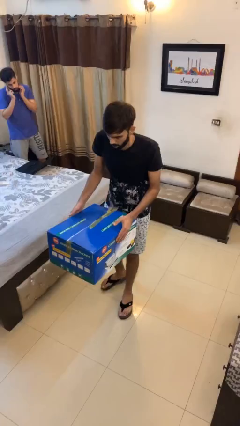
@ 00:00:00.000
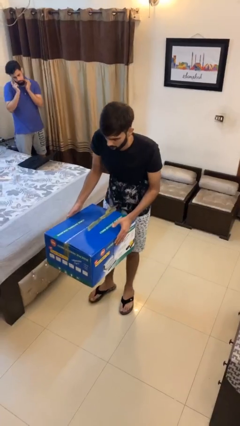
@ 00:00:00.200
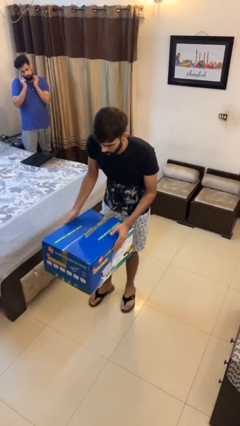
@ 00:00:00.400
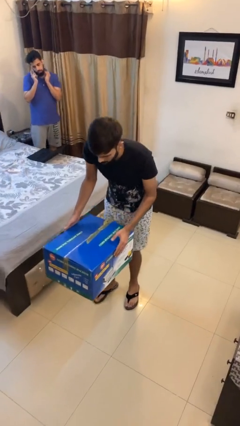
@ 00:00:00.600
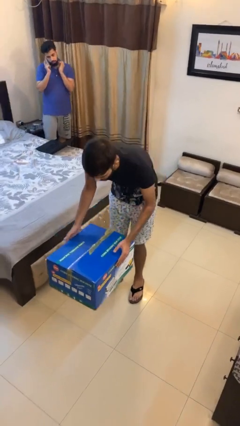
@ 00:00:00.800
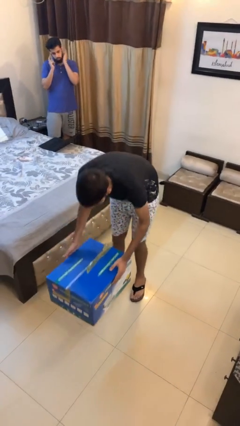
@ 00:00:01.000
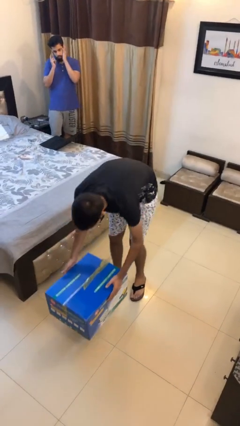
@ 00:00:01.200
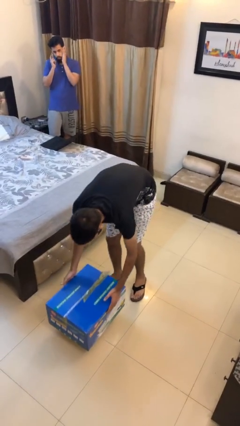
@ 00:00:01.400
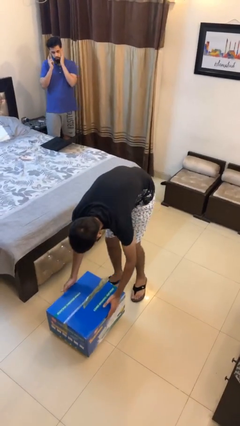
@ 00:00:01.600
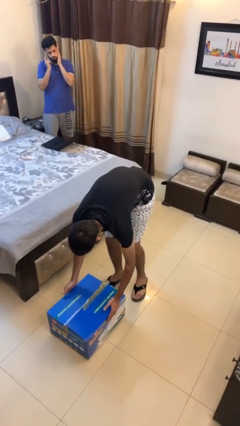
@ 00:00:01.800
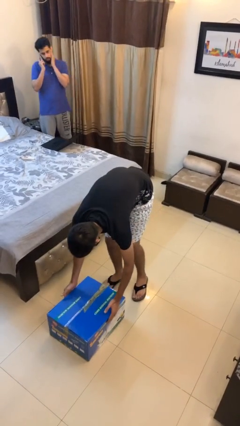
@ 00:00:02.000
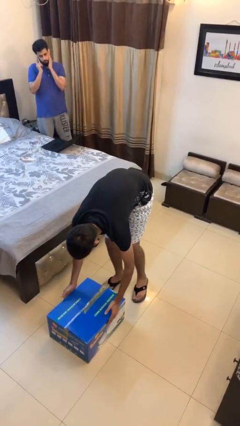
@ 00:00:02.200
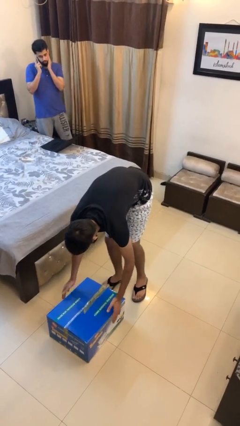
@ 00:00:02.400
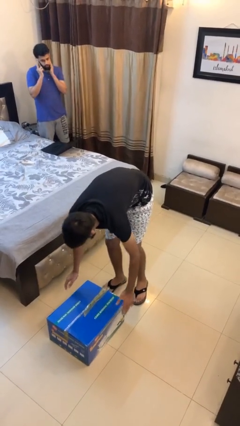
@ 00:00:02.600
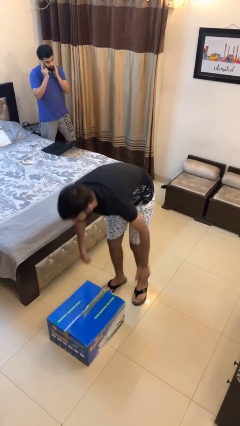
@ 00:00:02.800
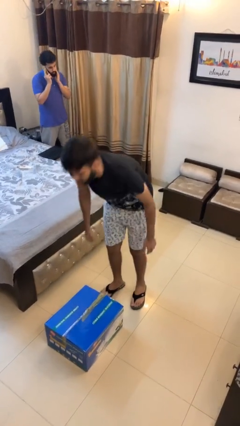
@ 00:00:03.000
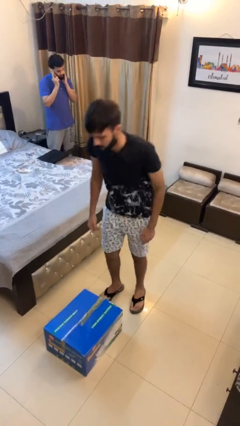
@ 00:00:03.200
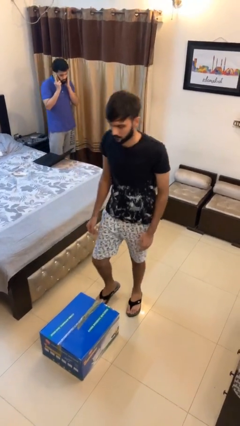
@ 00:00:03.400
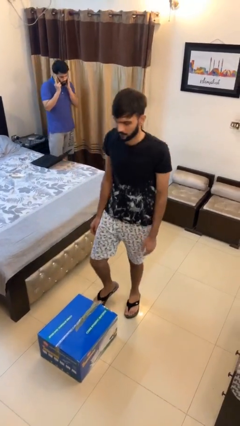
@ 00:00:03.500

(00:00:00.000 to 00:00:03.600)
person puts down object on floor

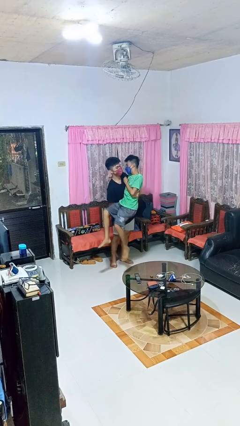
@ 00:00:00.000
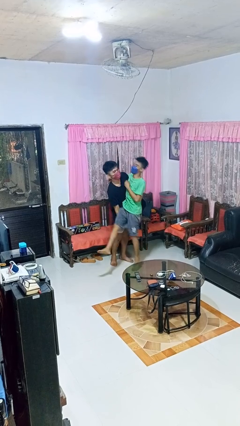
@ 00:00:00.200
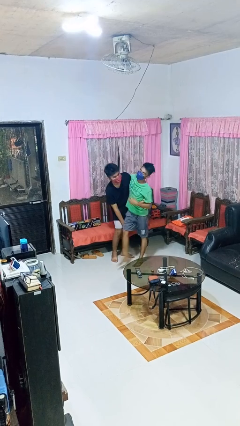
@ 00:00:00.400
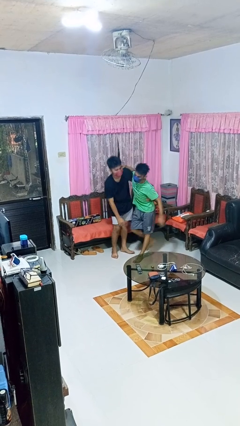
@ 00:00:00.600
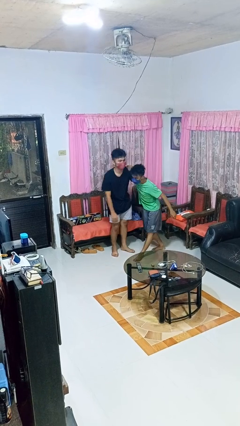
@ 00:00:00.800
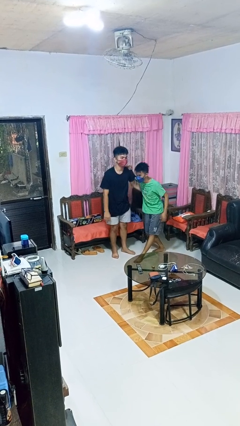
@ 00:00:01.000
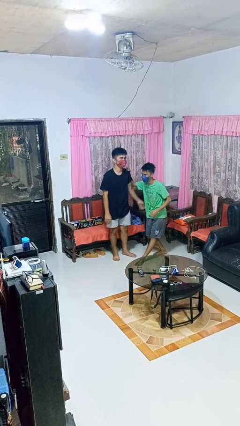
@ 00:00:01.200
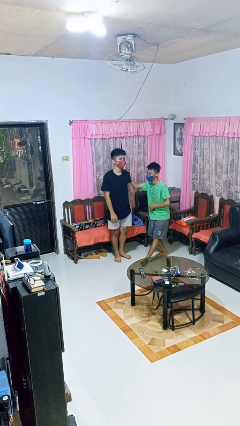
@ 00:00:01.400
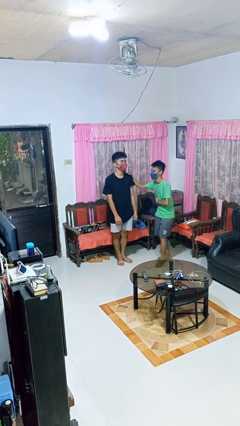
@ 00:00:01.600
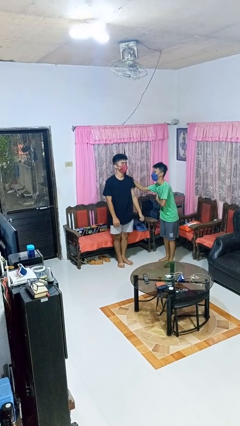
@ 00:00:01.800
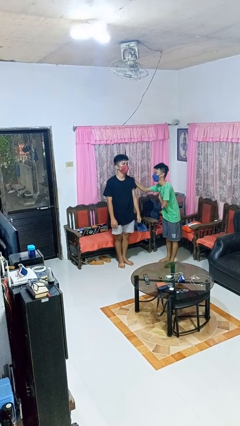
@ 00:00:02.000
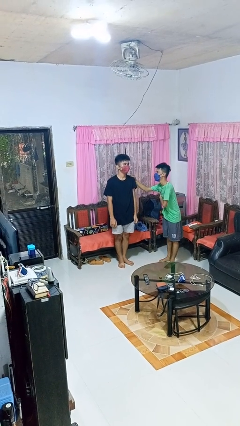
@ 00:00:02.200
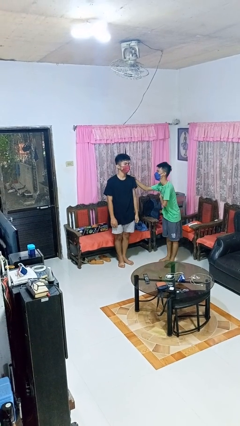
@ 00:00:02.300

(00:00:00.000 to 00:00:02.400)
person puts down person

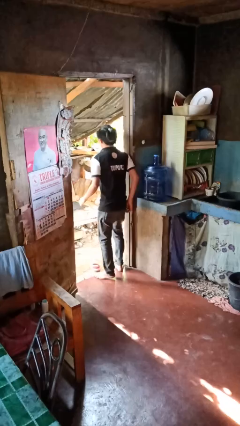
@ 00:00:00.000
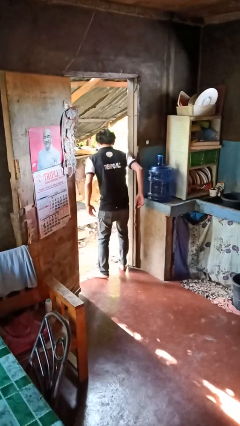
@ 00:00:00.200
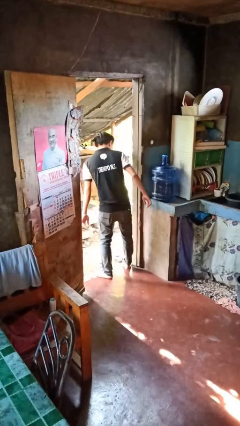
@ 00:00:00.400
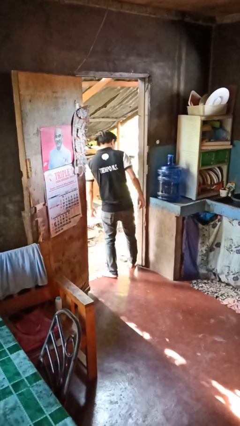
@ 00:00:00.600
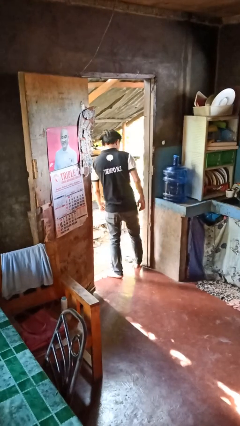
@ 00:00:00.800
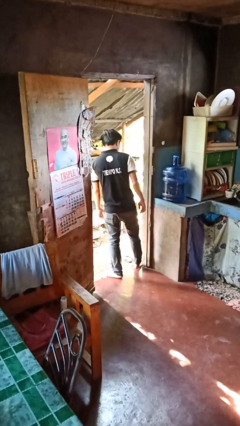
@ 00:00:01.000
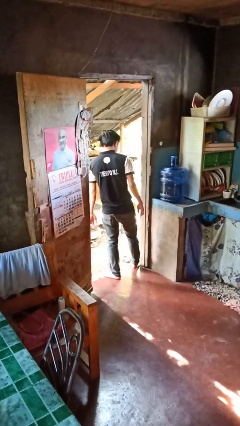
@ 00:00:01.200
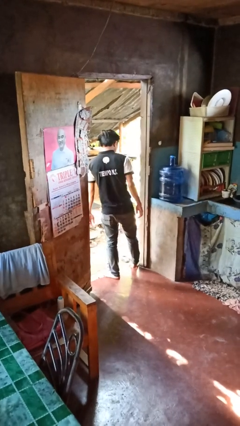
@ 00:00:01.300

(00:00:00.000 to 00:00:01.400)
person bumps into wall

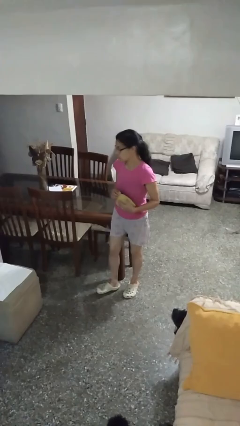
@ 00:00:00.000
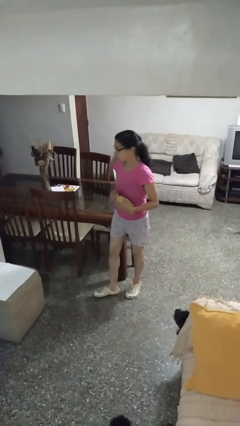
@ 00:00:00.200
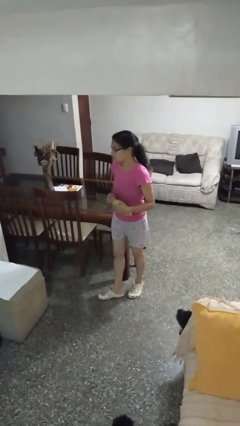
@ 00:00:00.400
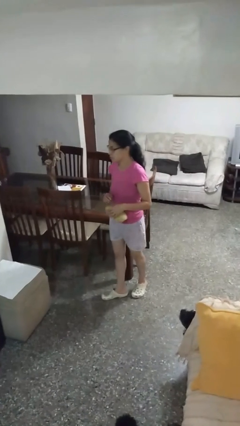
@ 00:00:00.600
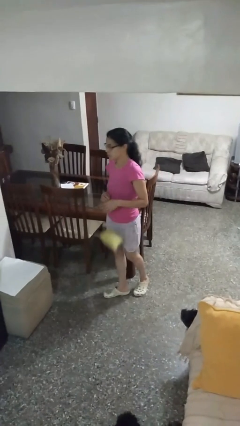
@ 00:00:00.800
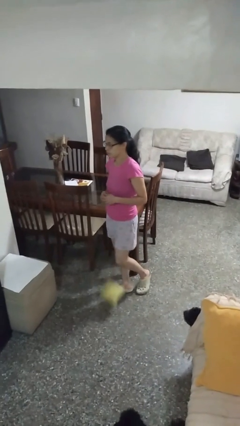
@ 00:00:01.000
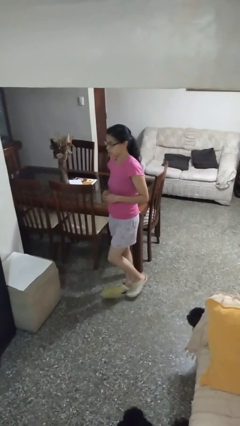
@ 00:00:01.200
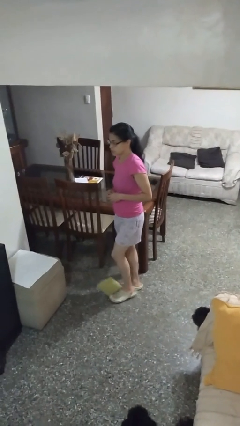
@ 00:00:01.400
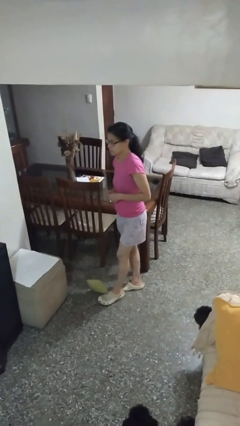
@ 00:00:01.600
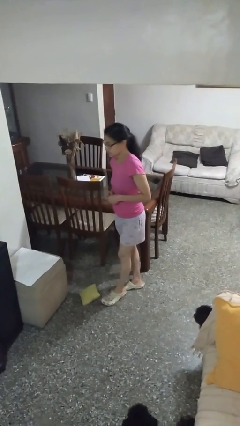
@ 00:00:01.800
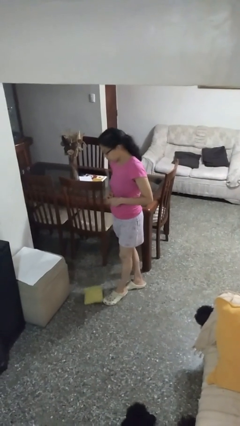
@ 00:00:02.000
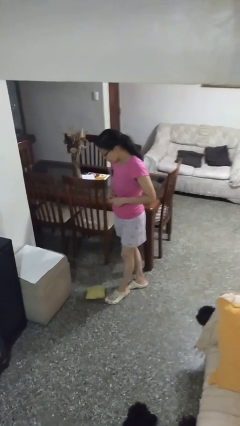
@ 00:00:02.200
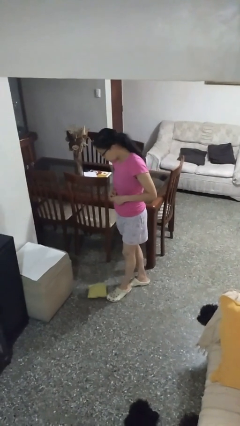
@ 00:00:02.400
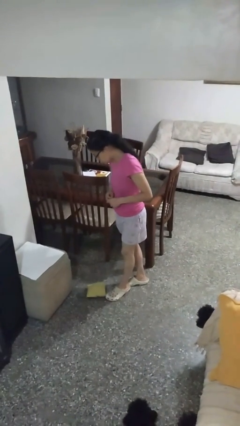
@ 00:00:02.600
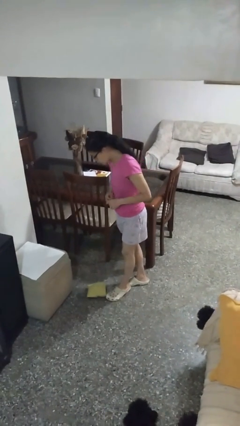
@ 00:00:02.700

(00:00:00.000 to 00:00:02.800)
person drops object

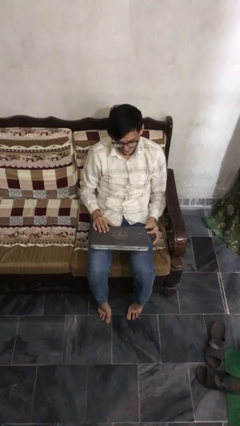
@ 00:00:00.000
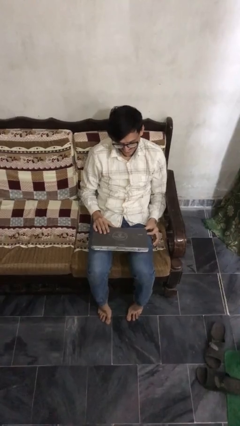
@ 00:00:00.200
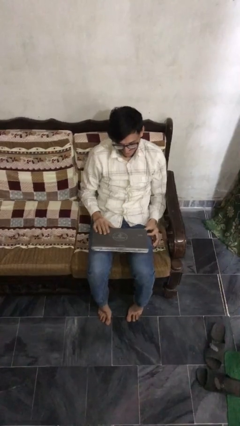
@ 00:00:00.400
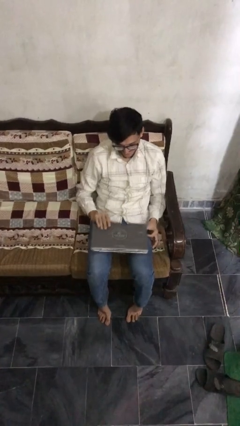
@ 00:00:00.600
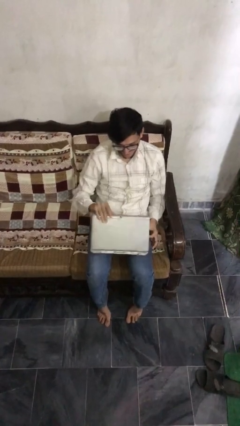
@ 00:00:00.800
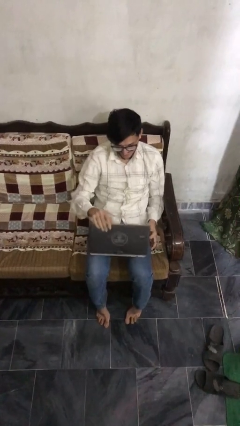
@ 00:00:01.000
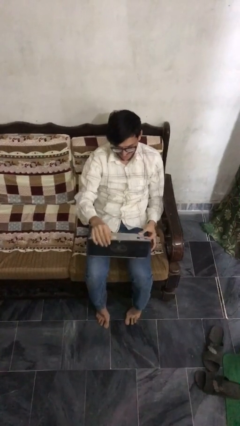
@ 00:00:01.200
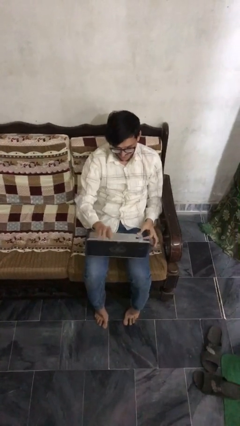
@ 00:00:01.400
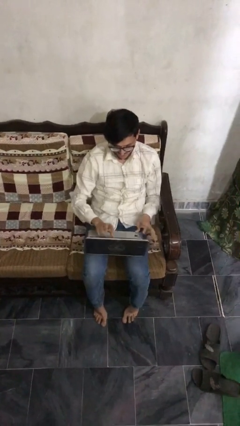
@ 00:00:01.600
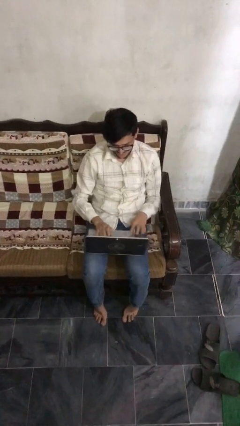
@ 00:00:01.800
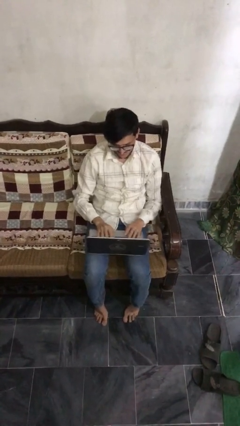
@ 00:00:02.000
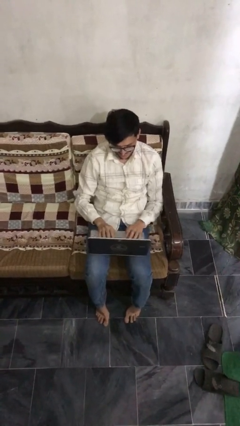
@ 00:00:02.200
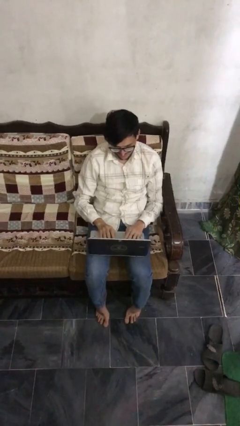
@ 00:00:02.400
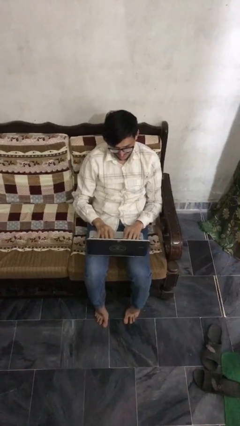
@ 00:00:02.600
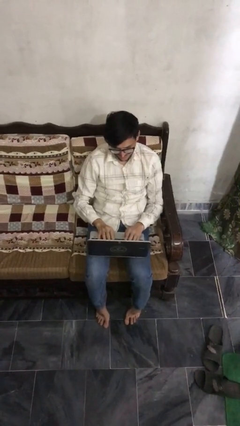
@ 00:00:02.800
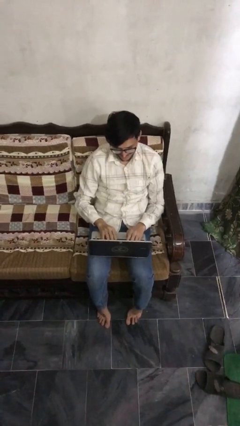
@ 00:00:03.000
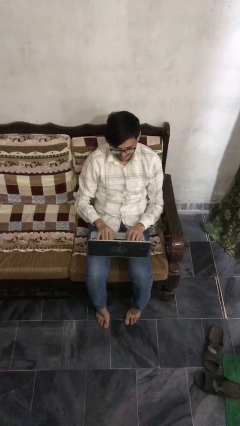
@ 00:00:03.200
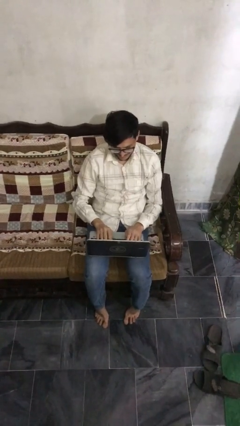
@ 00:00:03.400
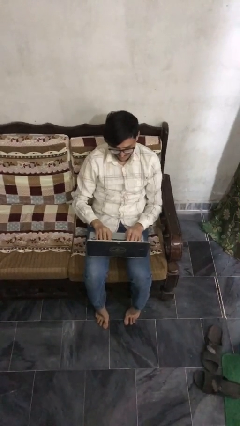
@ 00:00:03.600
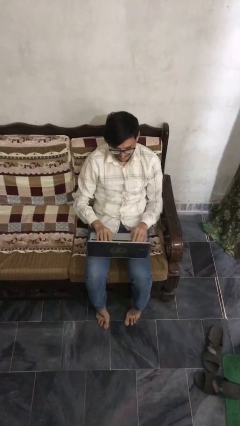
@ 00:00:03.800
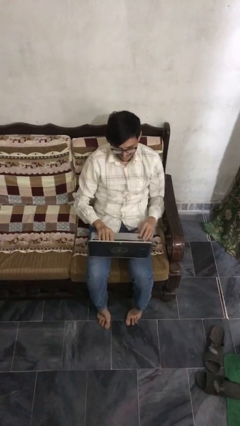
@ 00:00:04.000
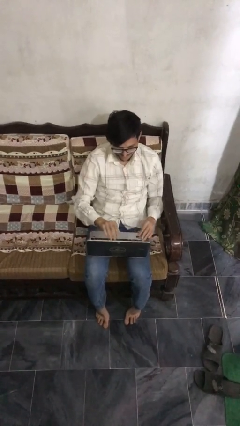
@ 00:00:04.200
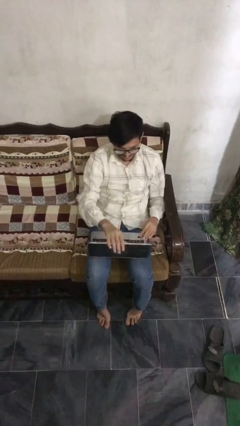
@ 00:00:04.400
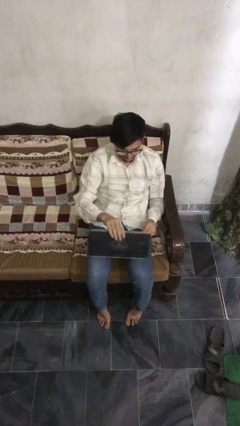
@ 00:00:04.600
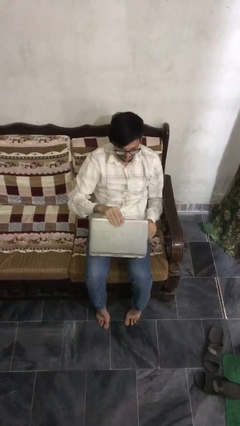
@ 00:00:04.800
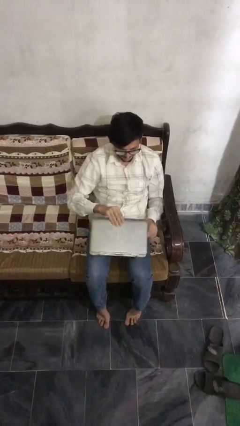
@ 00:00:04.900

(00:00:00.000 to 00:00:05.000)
person interacts with laptop

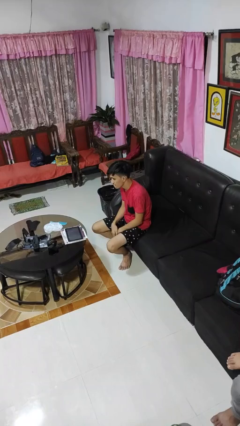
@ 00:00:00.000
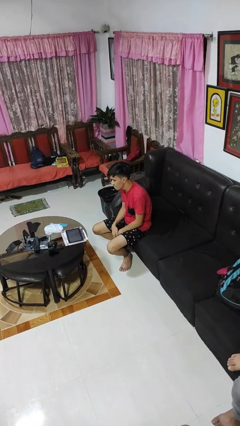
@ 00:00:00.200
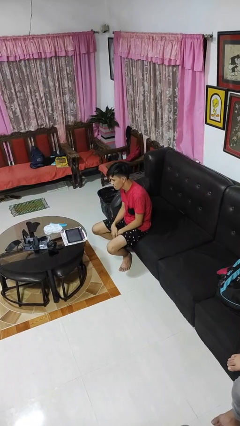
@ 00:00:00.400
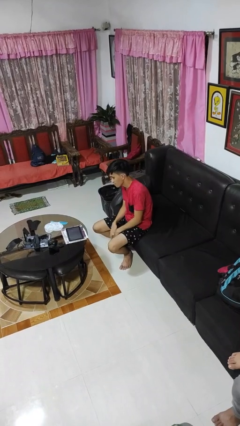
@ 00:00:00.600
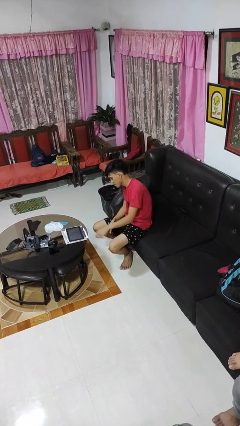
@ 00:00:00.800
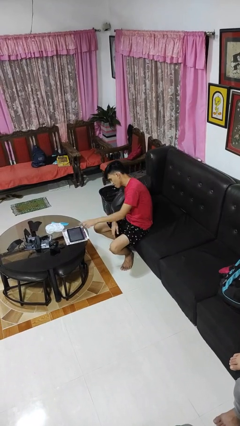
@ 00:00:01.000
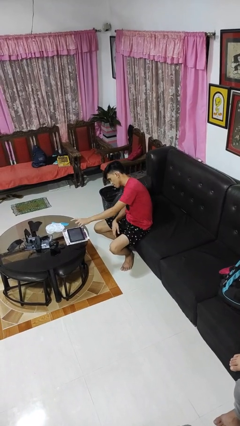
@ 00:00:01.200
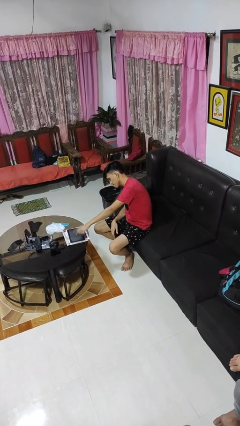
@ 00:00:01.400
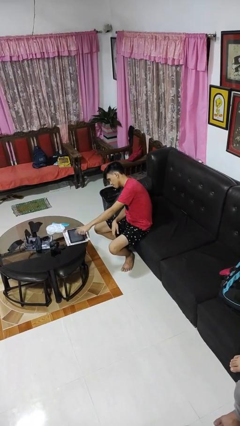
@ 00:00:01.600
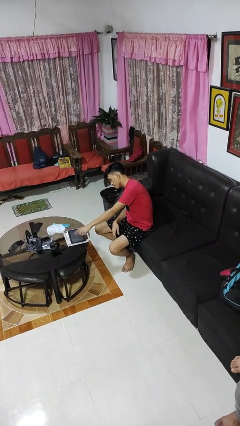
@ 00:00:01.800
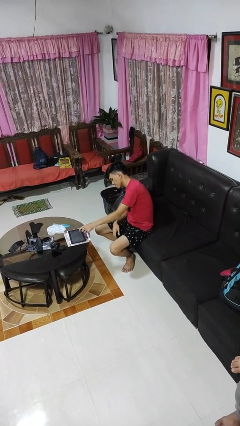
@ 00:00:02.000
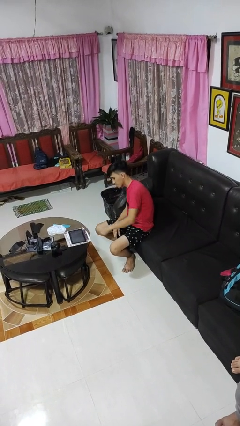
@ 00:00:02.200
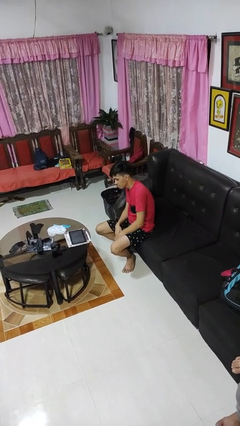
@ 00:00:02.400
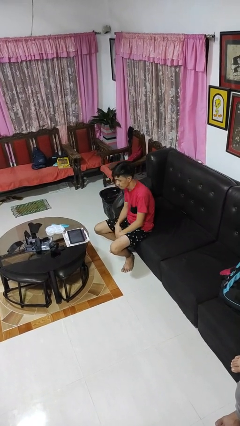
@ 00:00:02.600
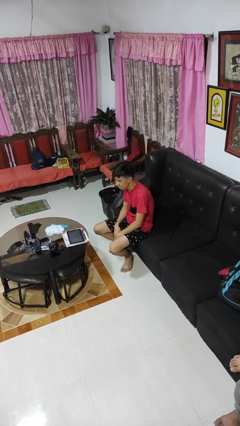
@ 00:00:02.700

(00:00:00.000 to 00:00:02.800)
person taps object with finger
